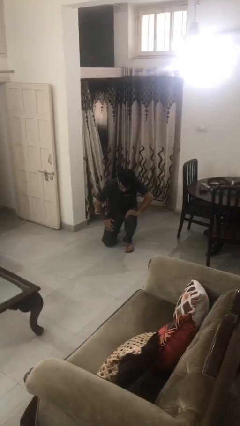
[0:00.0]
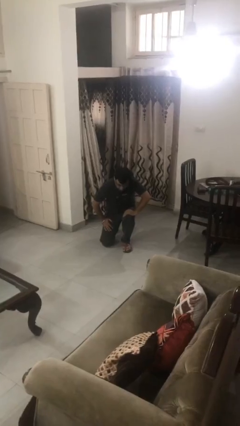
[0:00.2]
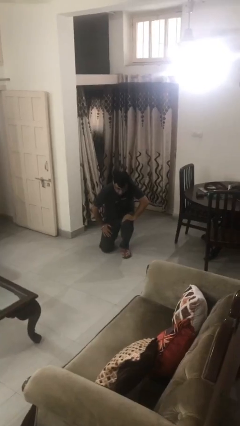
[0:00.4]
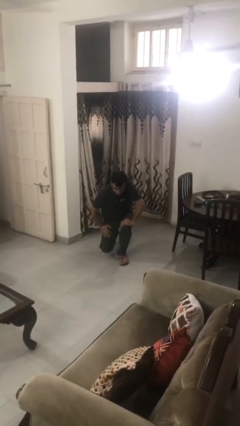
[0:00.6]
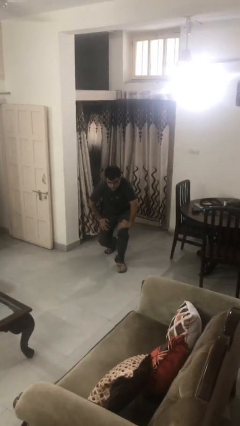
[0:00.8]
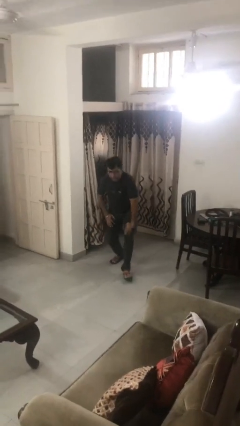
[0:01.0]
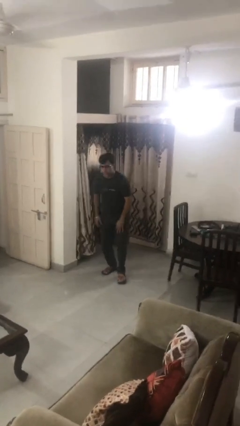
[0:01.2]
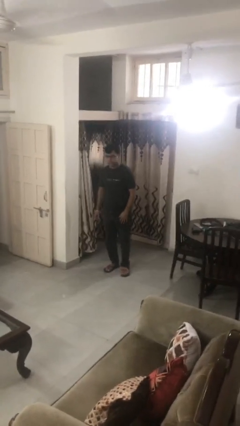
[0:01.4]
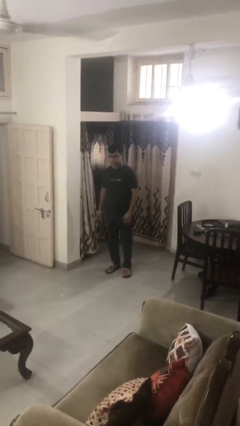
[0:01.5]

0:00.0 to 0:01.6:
person stands up from floor

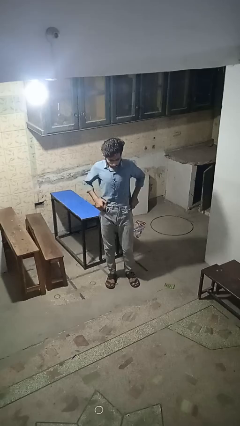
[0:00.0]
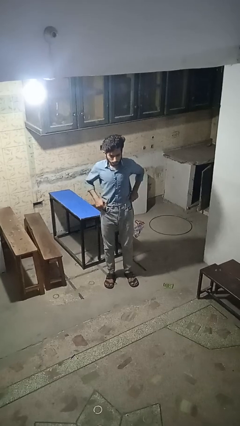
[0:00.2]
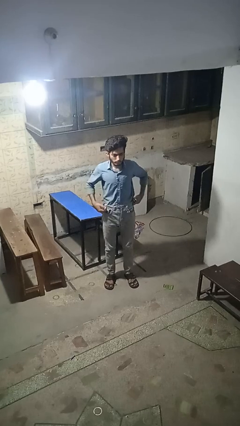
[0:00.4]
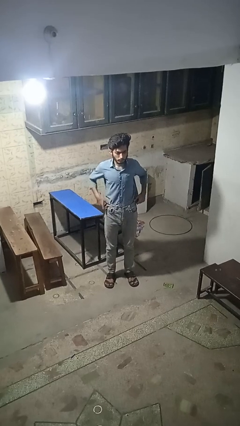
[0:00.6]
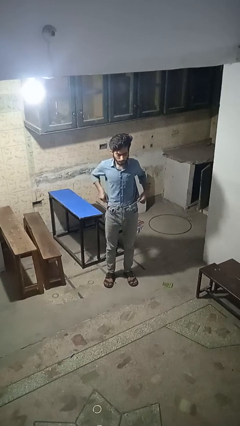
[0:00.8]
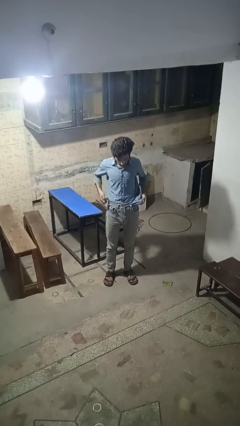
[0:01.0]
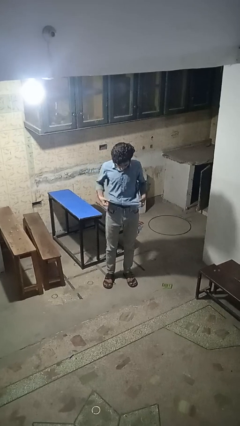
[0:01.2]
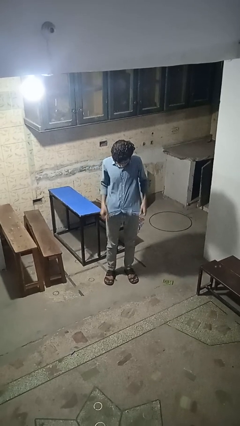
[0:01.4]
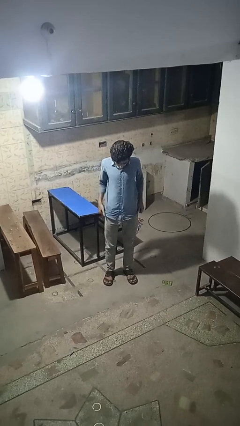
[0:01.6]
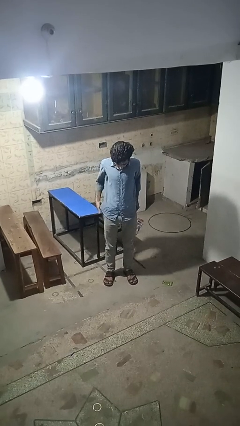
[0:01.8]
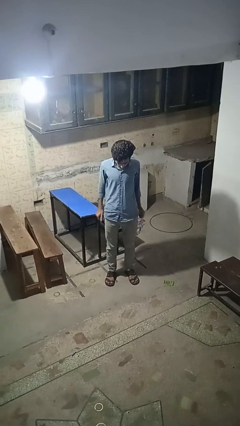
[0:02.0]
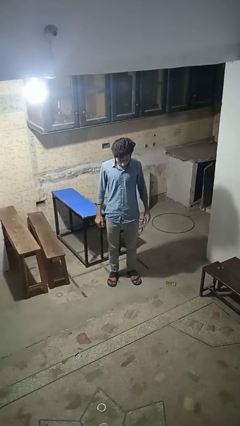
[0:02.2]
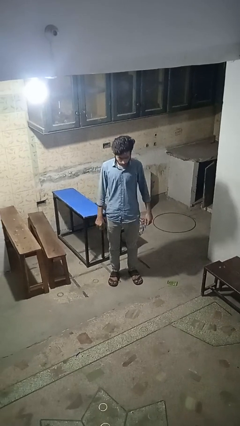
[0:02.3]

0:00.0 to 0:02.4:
person untucks shirt

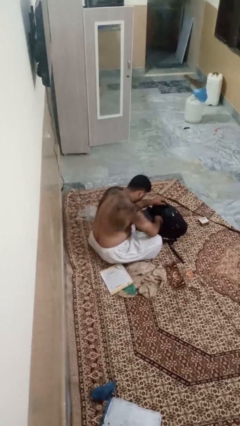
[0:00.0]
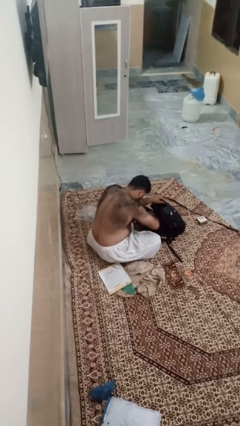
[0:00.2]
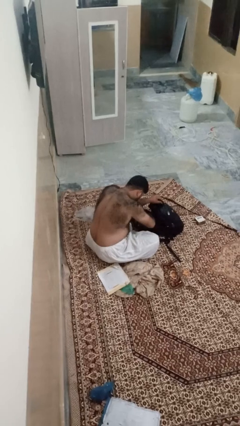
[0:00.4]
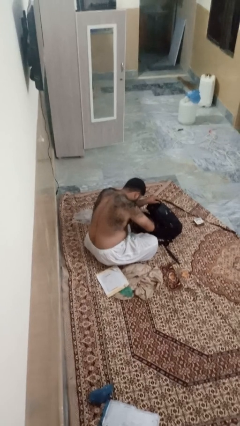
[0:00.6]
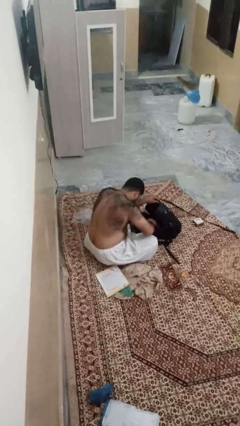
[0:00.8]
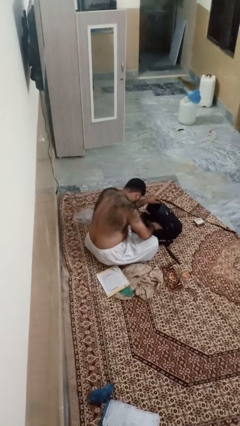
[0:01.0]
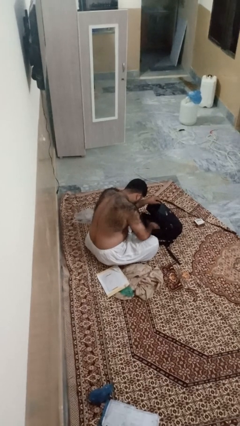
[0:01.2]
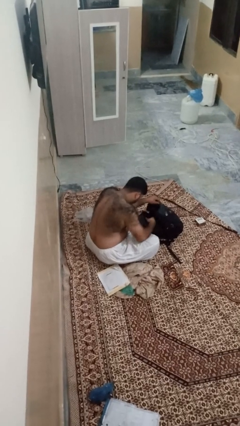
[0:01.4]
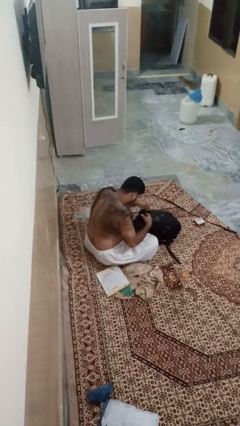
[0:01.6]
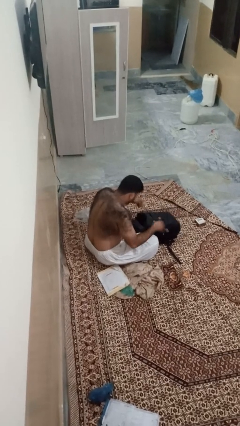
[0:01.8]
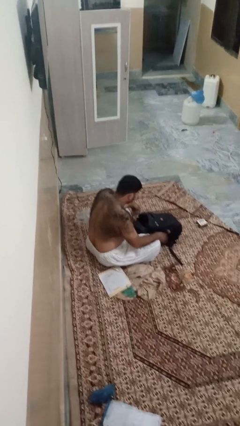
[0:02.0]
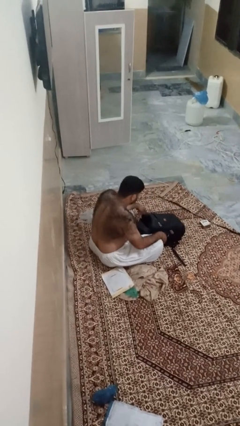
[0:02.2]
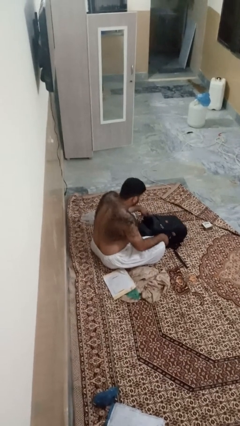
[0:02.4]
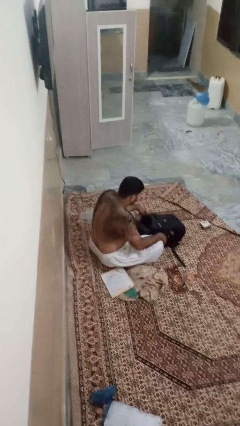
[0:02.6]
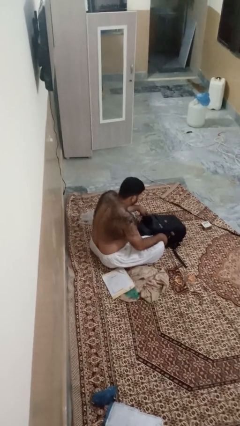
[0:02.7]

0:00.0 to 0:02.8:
person searches in bag

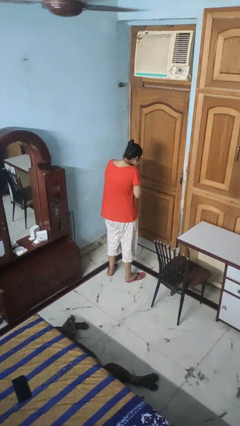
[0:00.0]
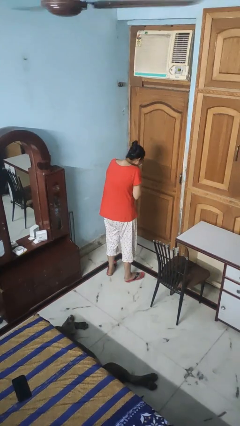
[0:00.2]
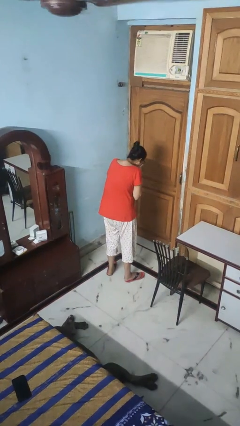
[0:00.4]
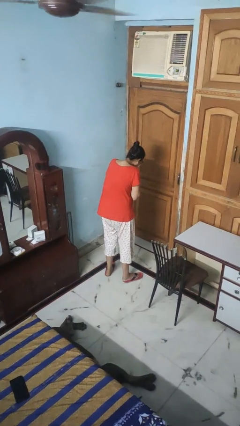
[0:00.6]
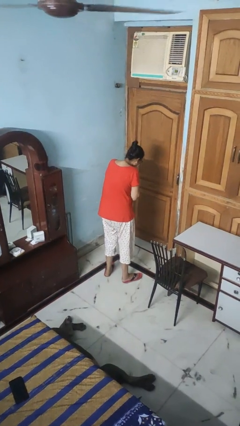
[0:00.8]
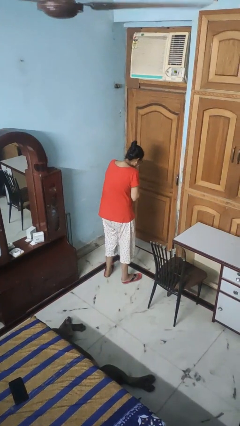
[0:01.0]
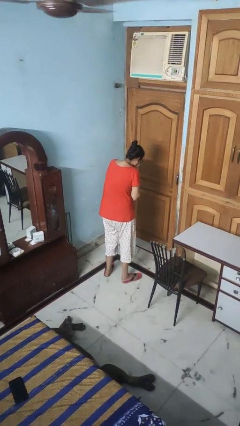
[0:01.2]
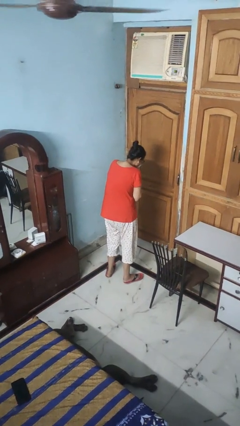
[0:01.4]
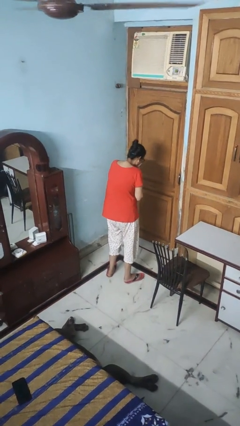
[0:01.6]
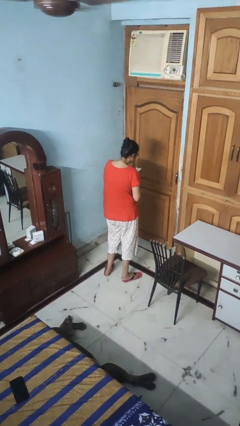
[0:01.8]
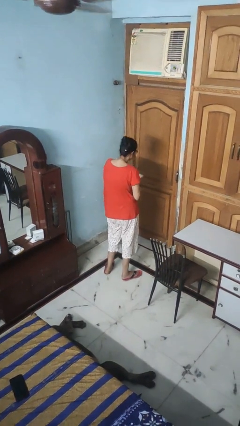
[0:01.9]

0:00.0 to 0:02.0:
person blows nose

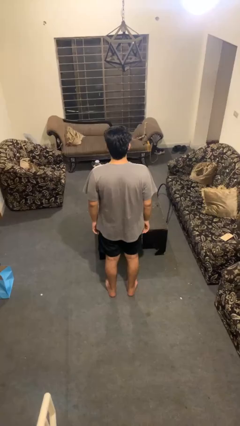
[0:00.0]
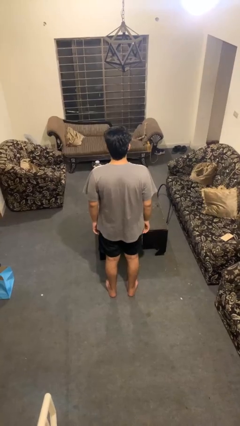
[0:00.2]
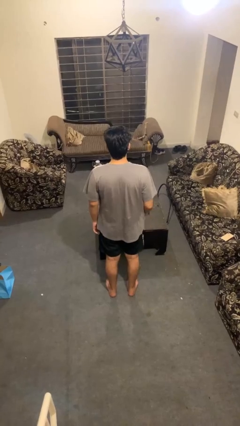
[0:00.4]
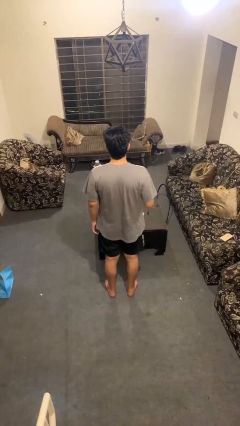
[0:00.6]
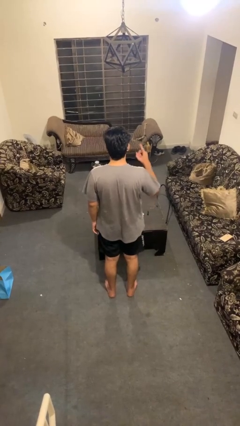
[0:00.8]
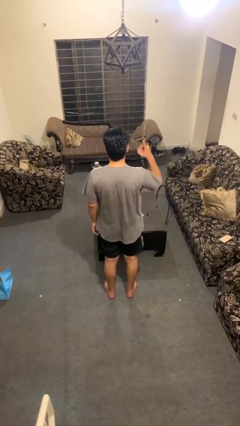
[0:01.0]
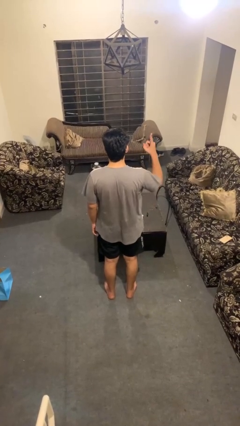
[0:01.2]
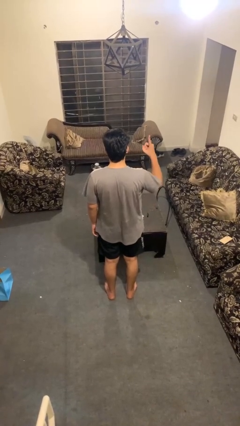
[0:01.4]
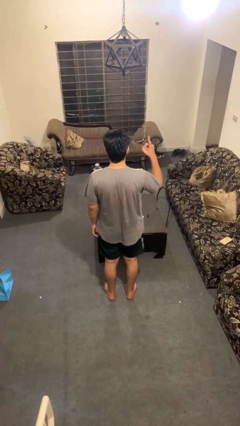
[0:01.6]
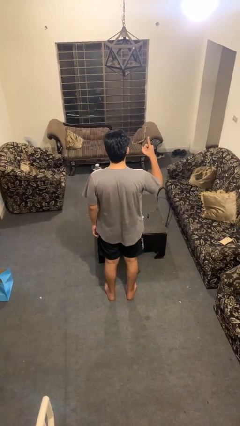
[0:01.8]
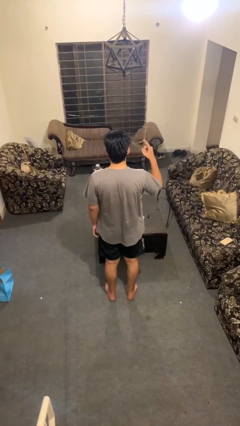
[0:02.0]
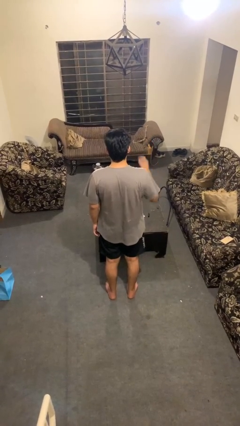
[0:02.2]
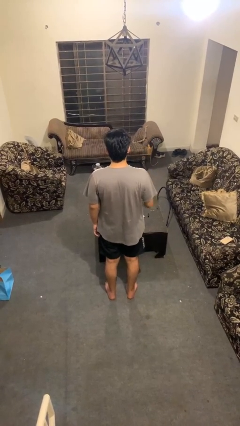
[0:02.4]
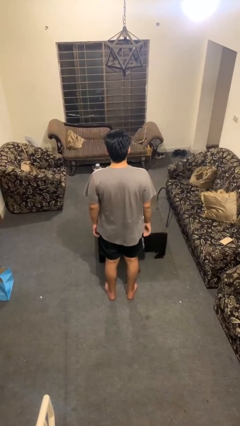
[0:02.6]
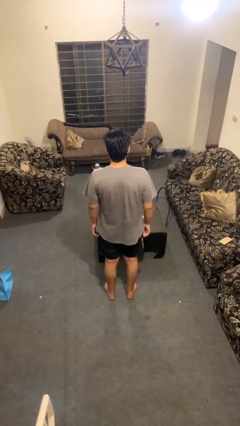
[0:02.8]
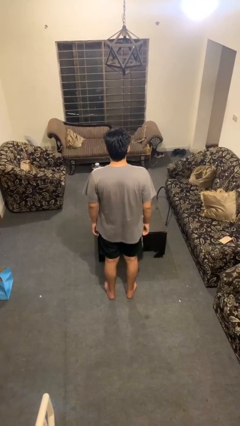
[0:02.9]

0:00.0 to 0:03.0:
person gestures number one

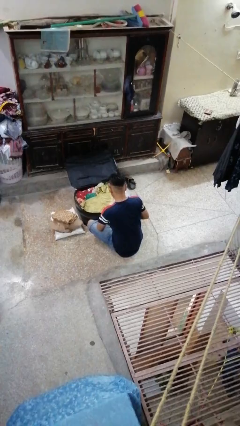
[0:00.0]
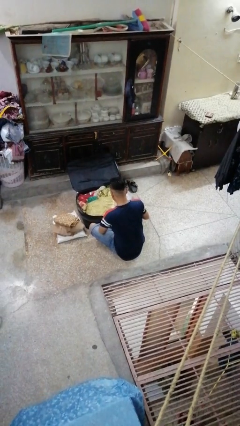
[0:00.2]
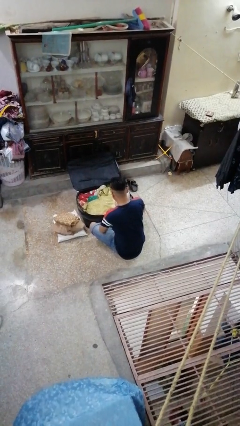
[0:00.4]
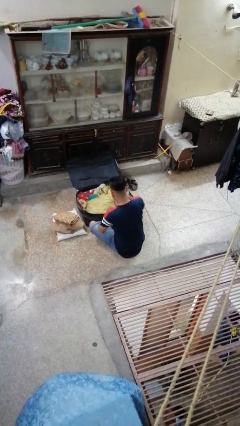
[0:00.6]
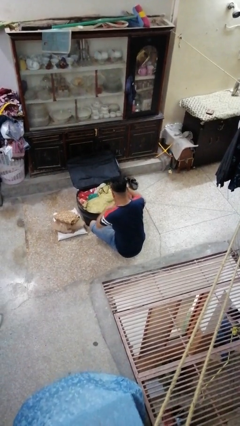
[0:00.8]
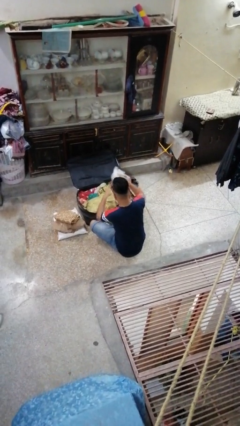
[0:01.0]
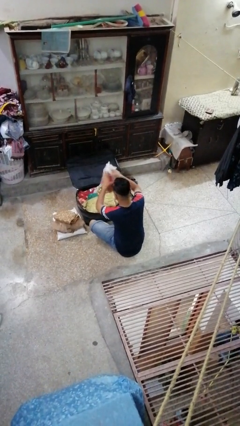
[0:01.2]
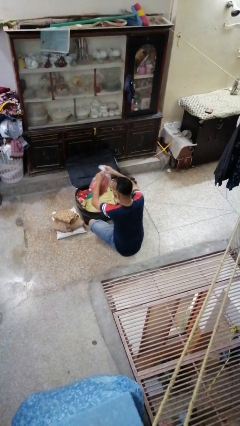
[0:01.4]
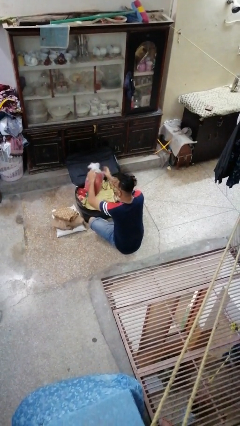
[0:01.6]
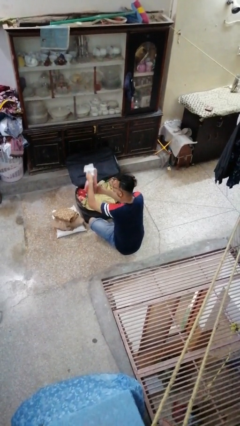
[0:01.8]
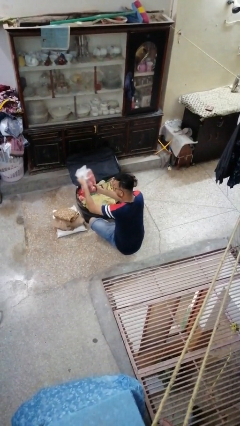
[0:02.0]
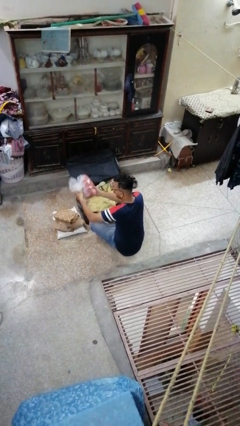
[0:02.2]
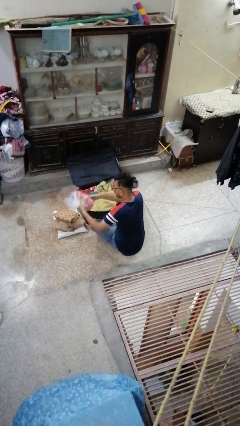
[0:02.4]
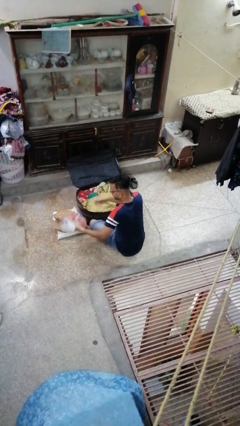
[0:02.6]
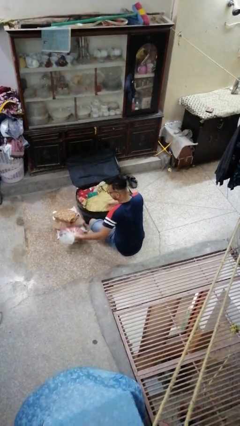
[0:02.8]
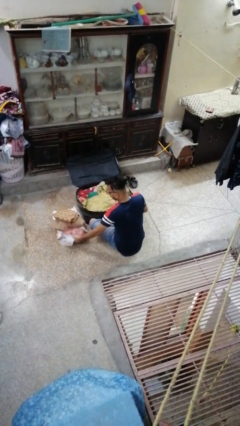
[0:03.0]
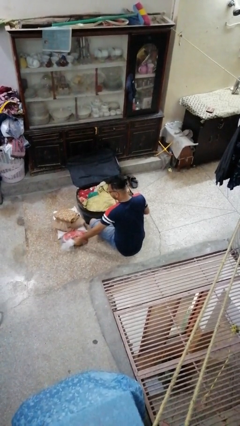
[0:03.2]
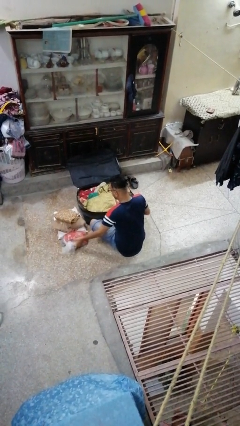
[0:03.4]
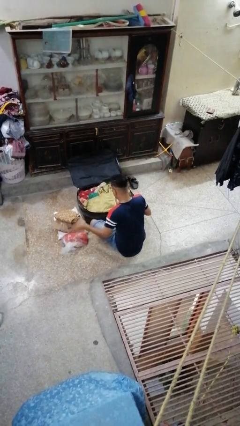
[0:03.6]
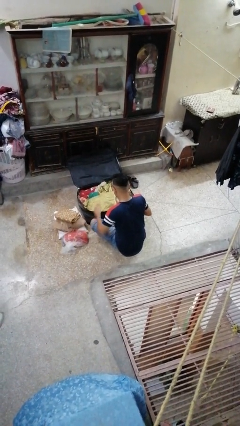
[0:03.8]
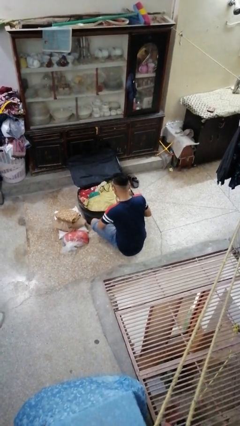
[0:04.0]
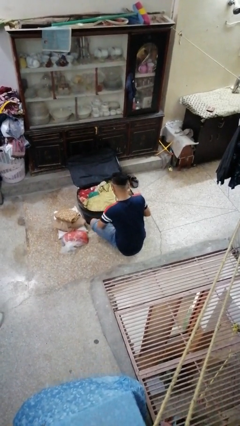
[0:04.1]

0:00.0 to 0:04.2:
person unloads clothes from suitcase

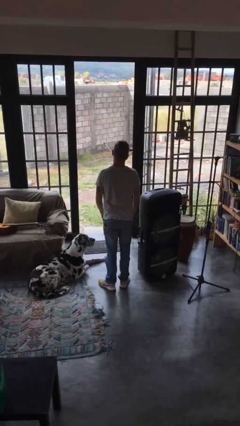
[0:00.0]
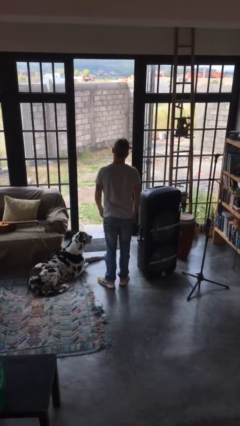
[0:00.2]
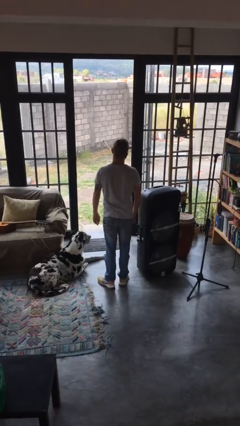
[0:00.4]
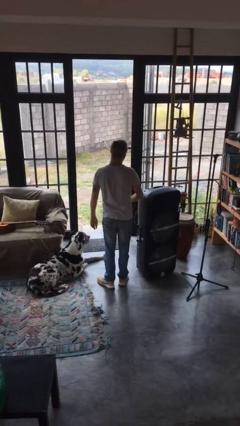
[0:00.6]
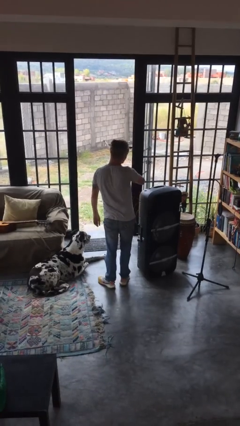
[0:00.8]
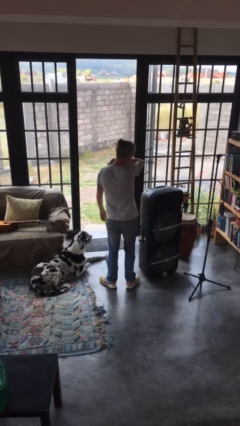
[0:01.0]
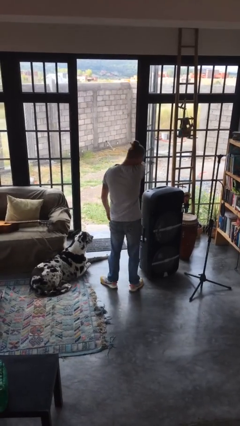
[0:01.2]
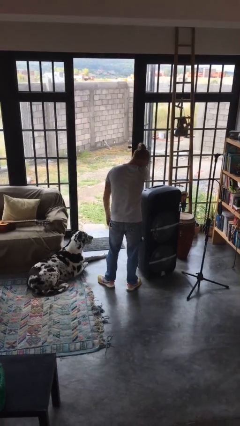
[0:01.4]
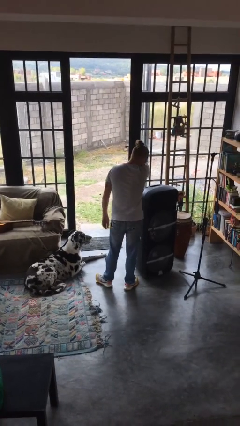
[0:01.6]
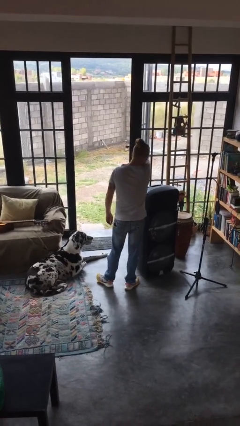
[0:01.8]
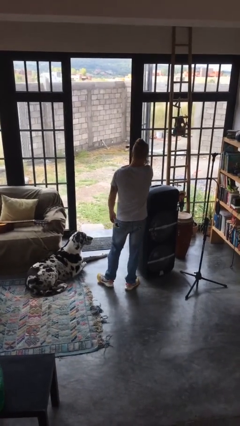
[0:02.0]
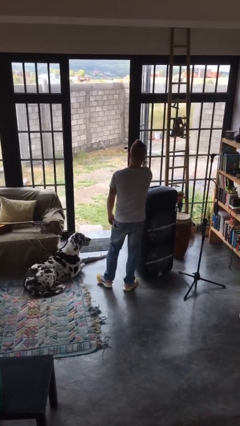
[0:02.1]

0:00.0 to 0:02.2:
person sneezes into arm
